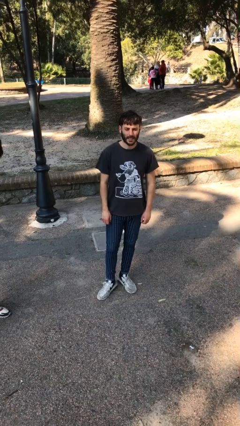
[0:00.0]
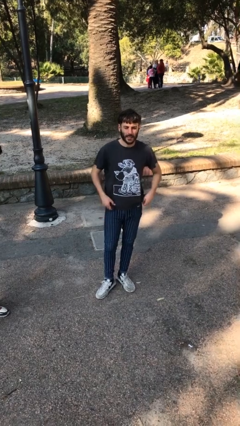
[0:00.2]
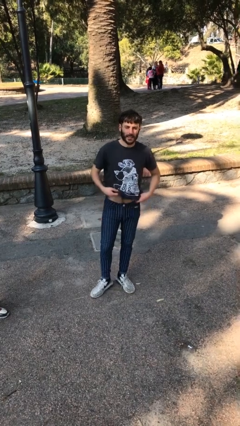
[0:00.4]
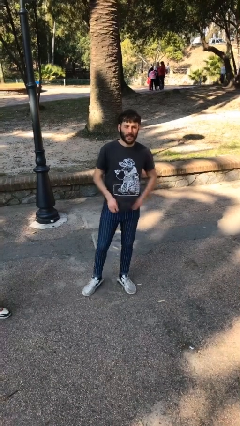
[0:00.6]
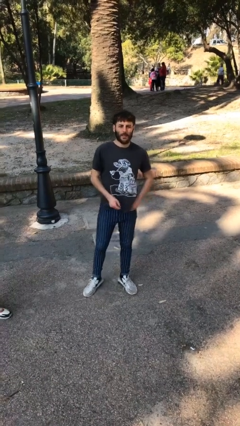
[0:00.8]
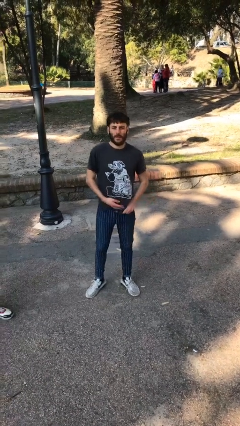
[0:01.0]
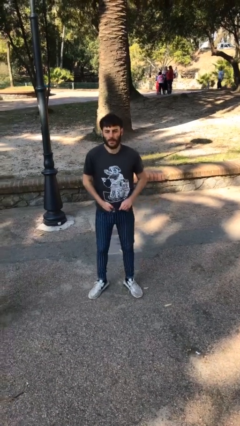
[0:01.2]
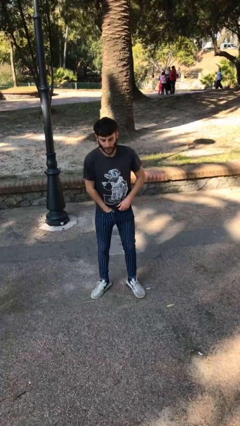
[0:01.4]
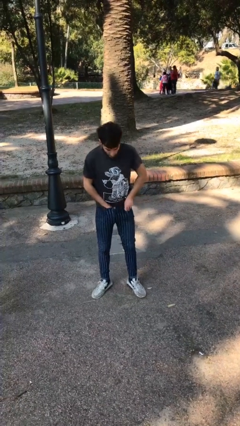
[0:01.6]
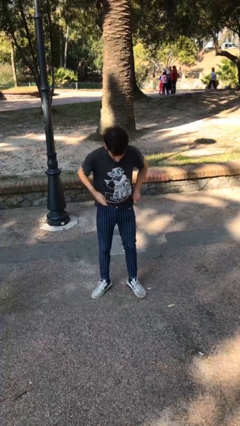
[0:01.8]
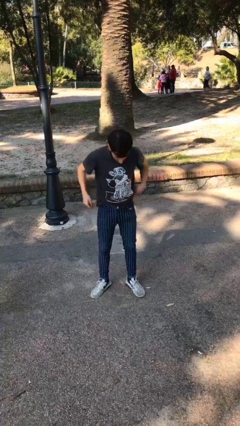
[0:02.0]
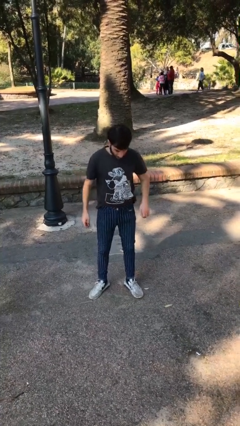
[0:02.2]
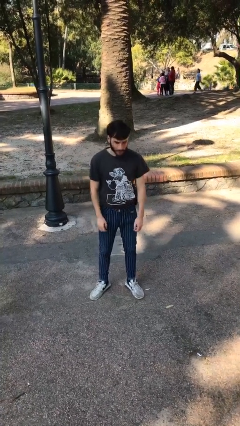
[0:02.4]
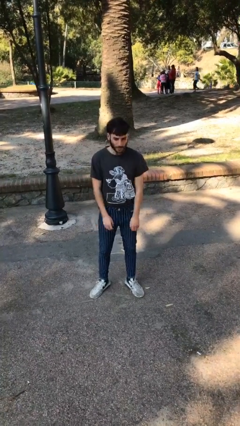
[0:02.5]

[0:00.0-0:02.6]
person tucks in shirt

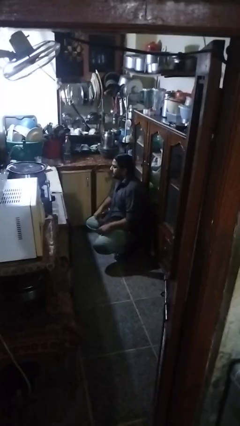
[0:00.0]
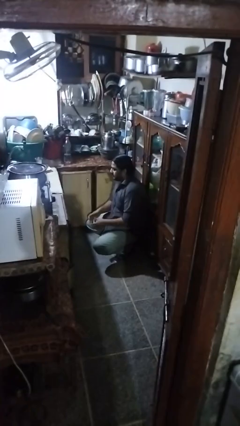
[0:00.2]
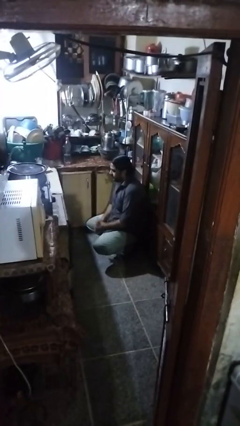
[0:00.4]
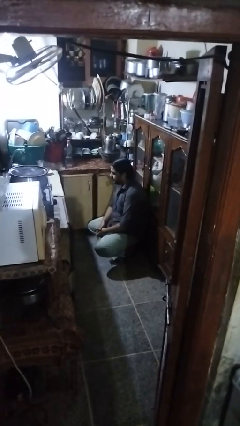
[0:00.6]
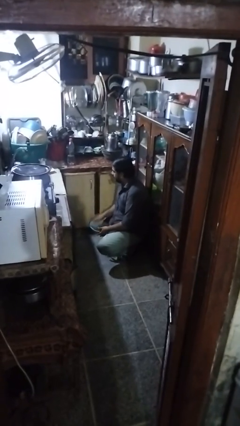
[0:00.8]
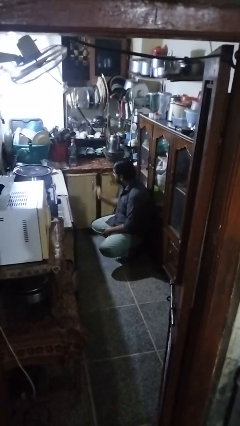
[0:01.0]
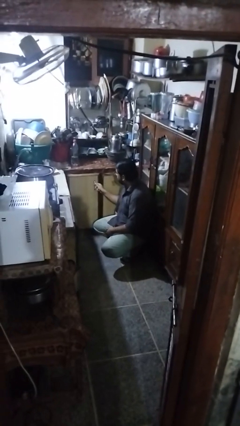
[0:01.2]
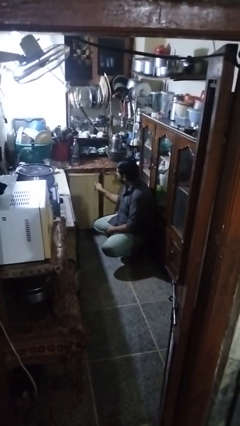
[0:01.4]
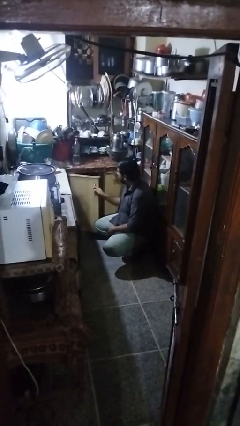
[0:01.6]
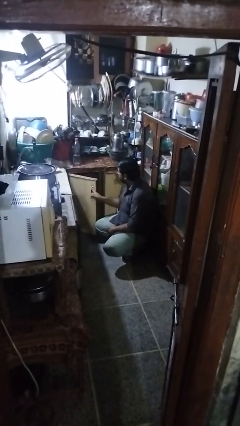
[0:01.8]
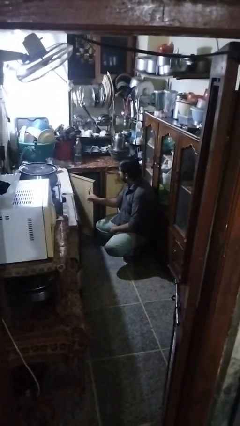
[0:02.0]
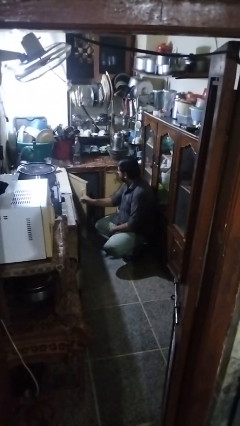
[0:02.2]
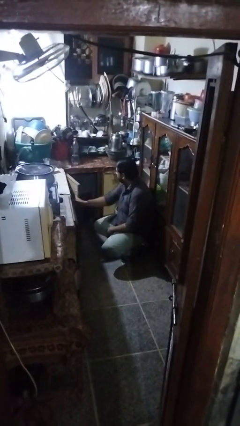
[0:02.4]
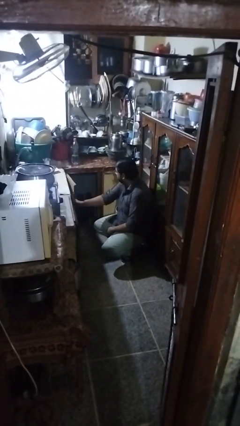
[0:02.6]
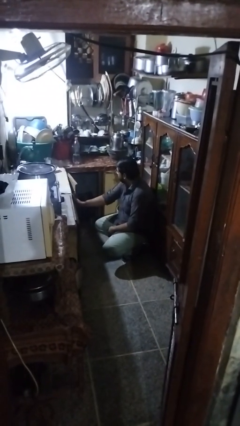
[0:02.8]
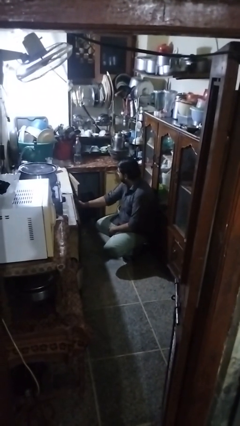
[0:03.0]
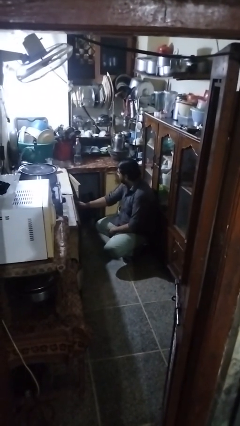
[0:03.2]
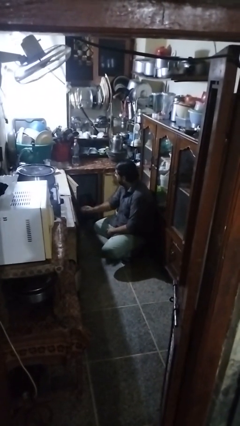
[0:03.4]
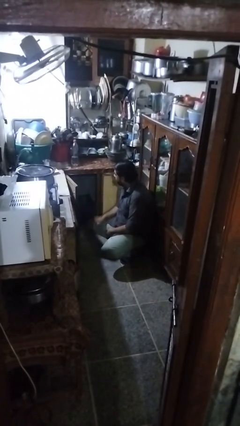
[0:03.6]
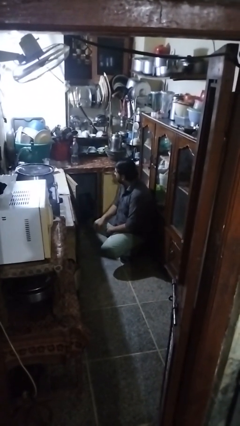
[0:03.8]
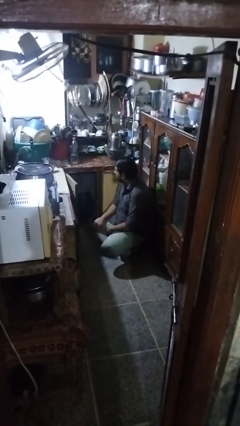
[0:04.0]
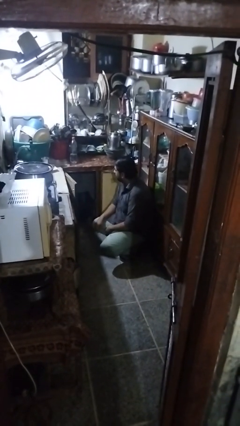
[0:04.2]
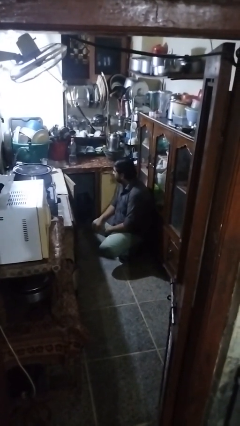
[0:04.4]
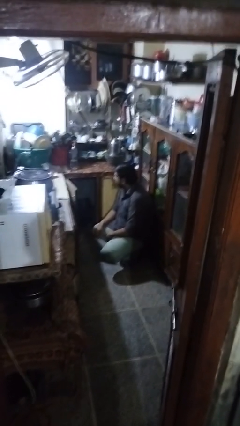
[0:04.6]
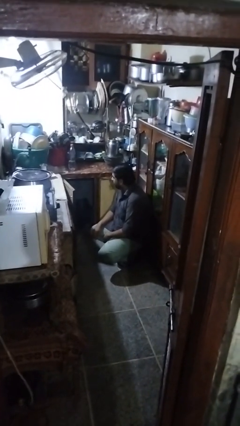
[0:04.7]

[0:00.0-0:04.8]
person opens cabinet

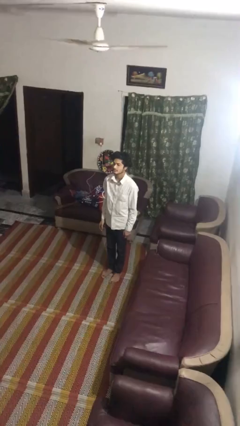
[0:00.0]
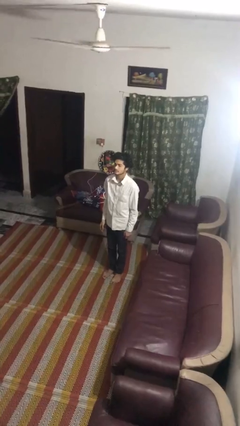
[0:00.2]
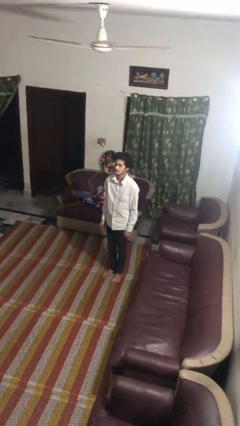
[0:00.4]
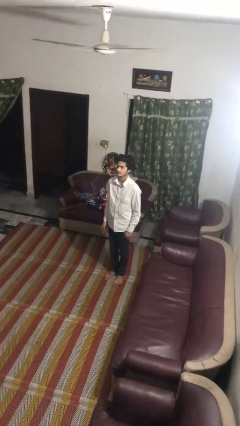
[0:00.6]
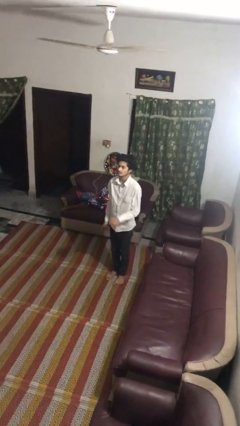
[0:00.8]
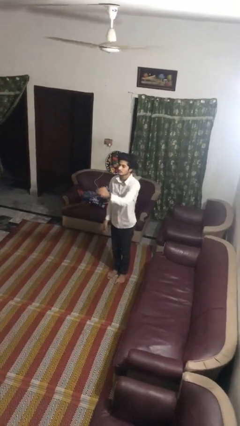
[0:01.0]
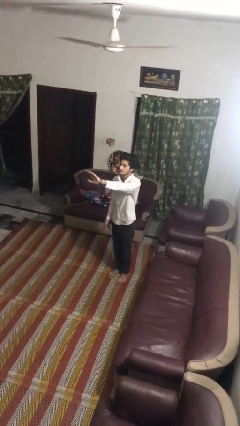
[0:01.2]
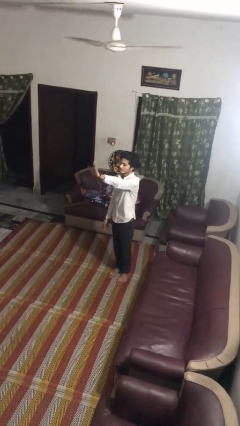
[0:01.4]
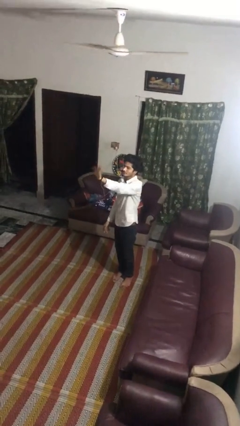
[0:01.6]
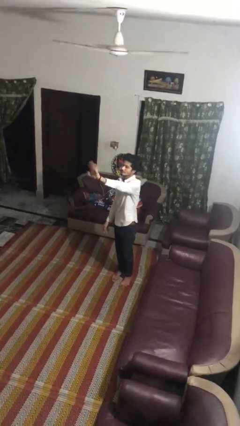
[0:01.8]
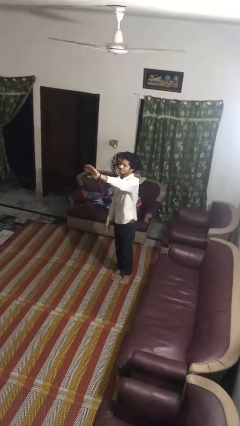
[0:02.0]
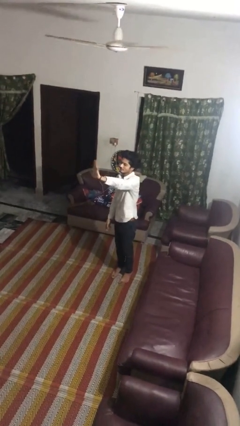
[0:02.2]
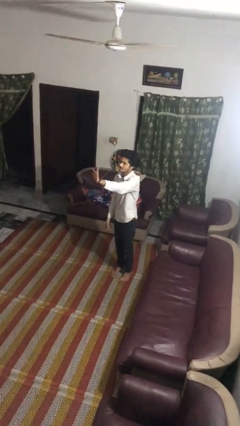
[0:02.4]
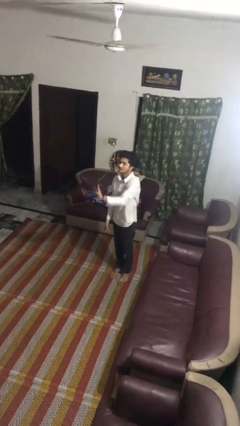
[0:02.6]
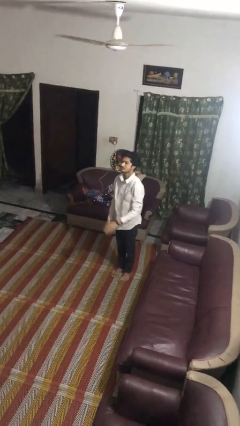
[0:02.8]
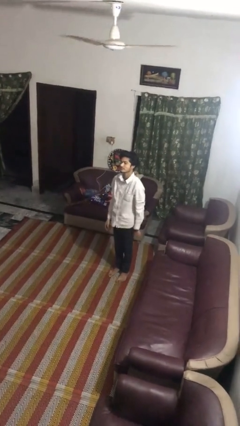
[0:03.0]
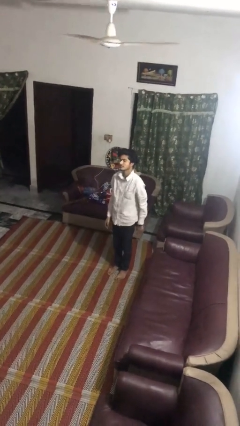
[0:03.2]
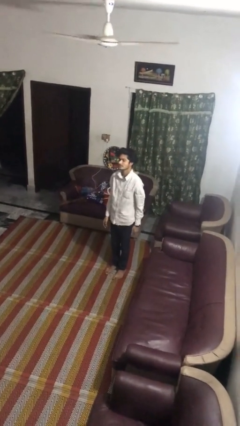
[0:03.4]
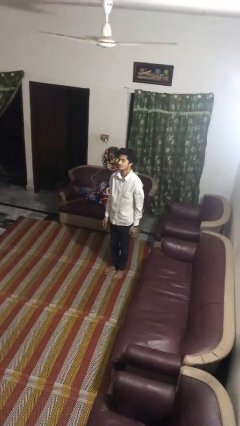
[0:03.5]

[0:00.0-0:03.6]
person waves at person

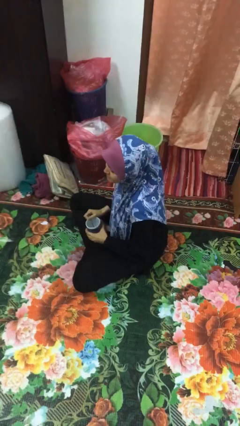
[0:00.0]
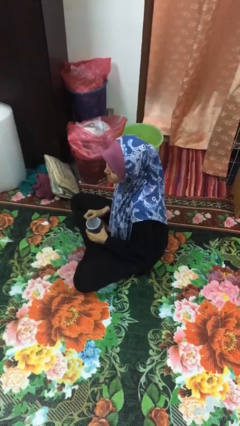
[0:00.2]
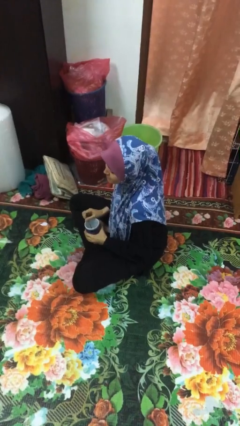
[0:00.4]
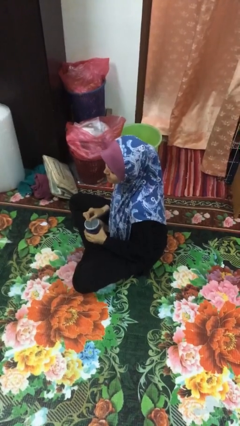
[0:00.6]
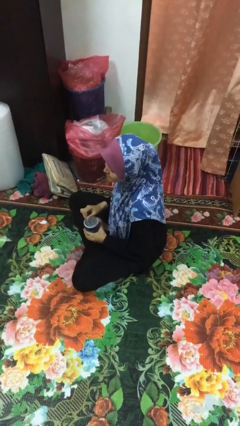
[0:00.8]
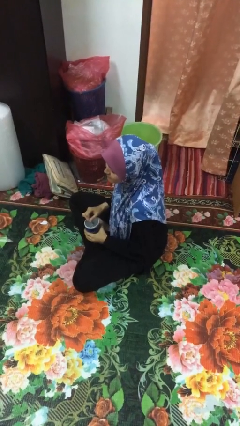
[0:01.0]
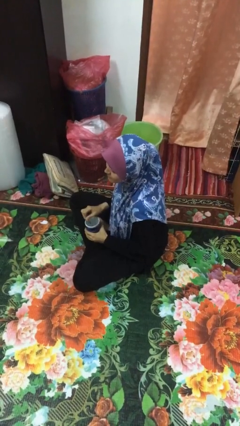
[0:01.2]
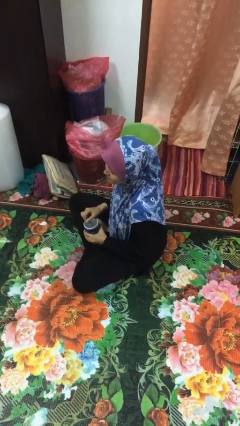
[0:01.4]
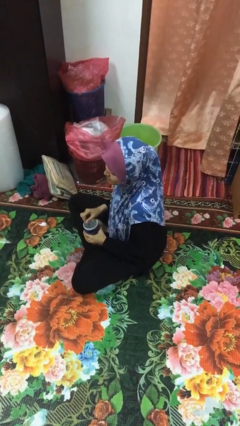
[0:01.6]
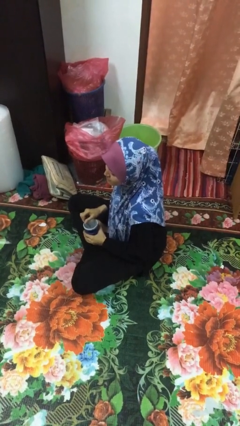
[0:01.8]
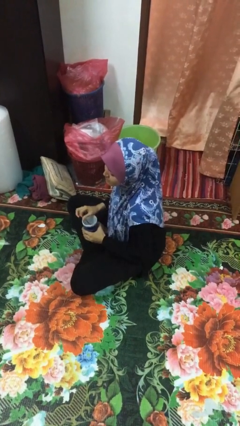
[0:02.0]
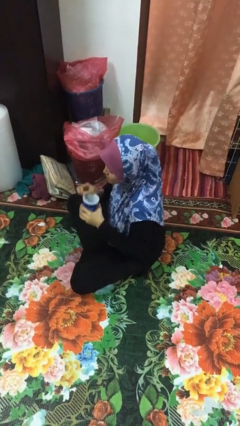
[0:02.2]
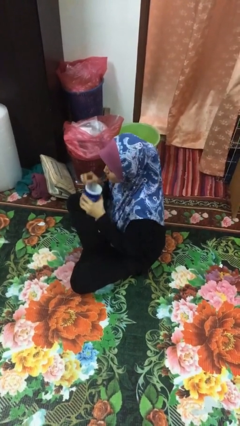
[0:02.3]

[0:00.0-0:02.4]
person stirs mug

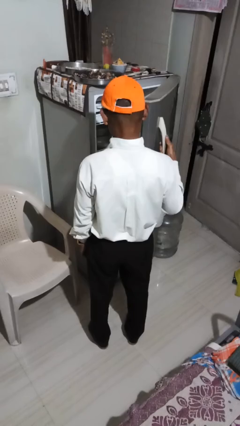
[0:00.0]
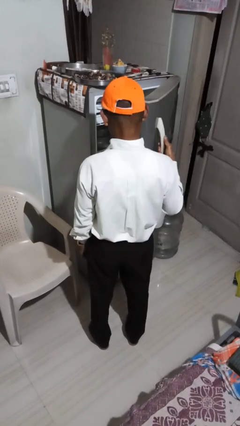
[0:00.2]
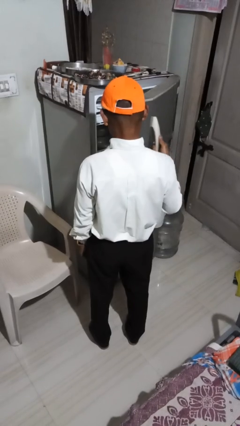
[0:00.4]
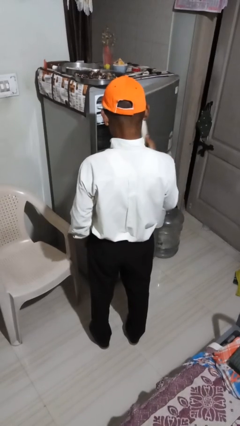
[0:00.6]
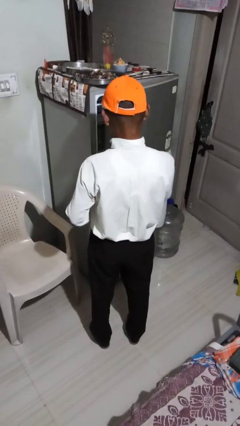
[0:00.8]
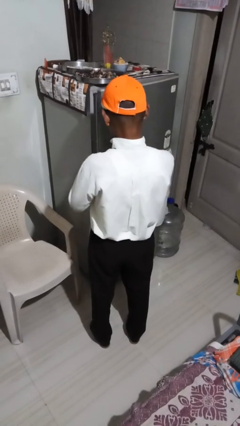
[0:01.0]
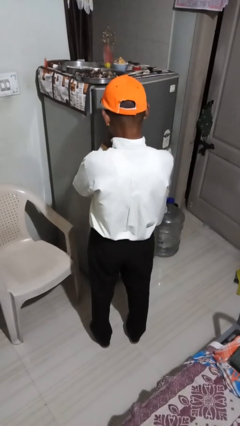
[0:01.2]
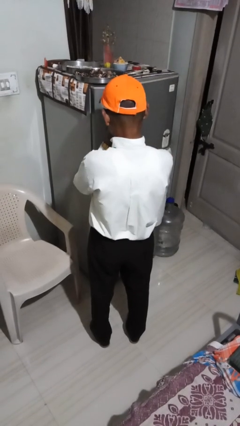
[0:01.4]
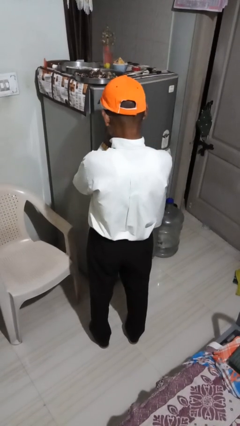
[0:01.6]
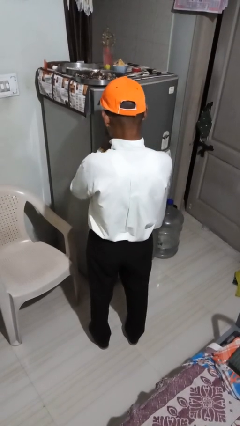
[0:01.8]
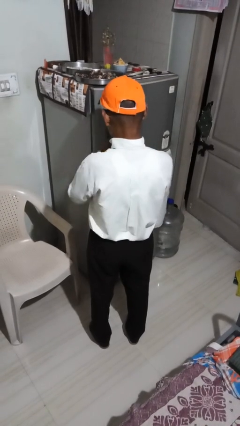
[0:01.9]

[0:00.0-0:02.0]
person closes clothes washer

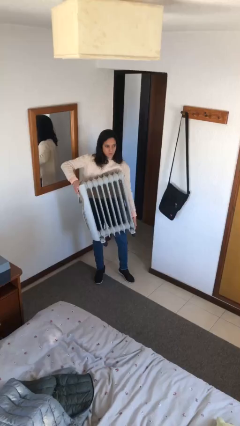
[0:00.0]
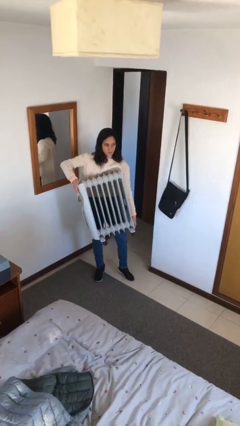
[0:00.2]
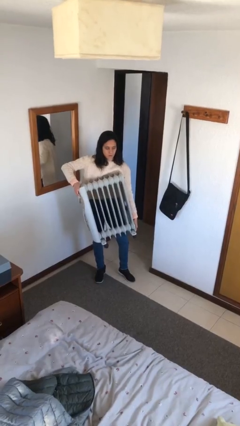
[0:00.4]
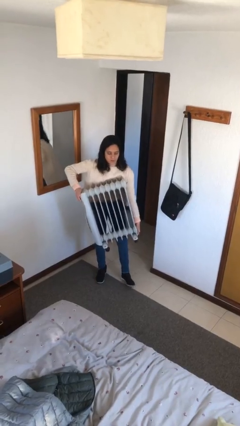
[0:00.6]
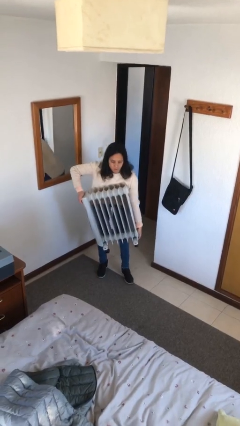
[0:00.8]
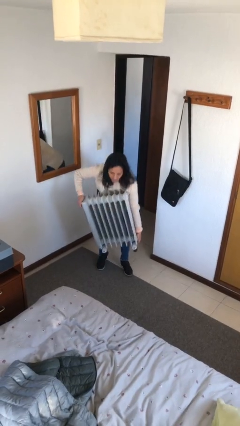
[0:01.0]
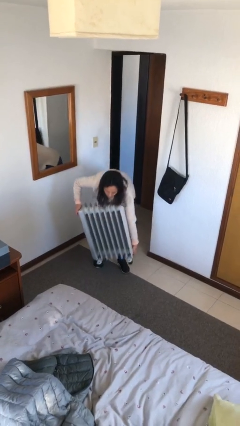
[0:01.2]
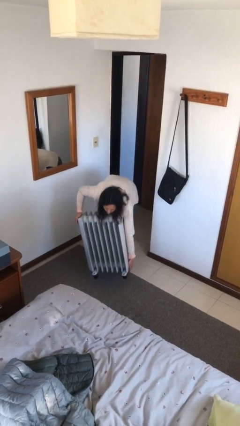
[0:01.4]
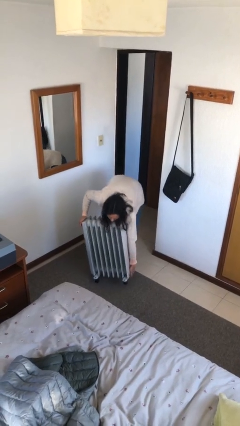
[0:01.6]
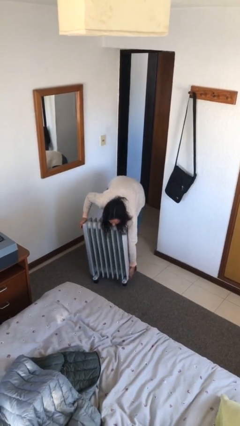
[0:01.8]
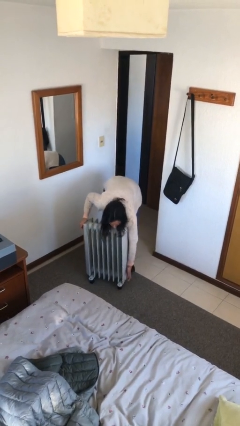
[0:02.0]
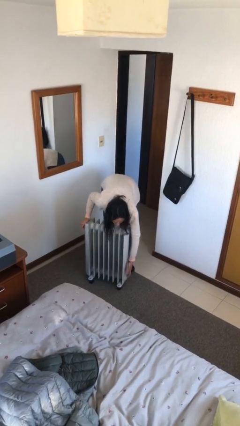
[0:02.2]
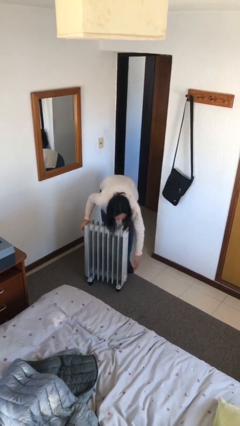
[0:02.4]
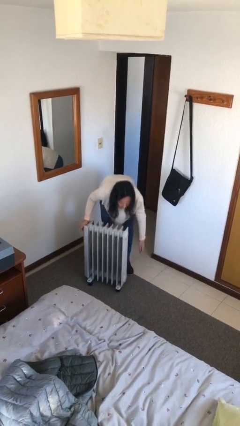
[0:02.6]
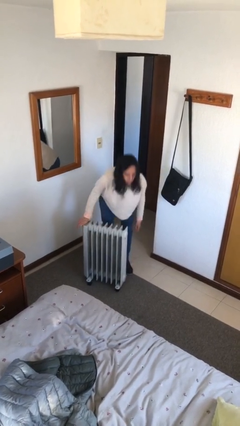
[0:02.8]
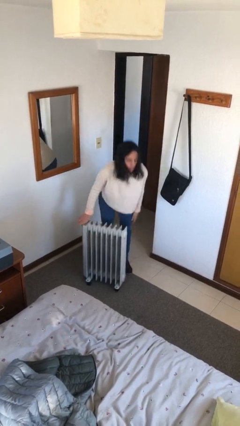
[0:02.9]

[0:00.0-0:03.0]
person puts down object on floor
